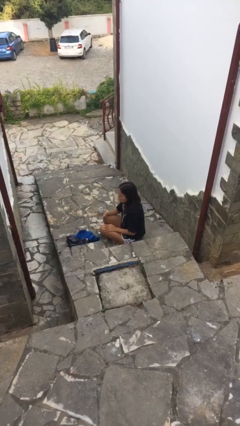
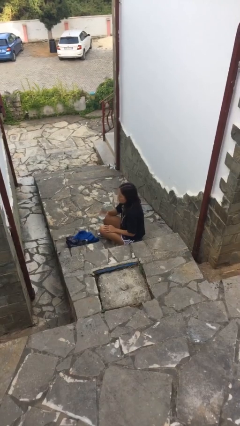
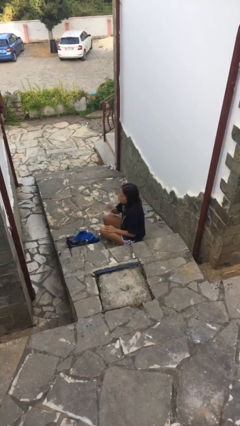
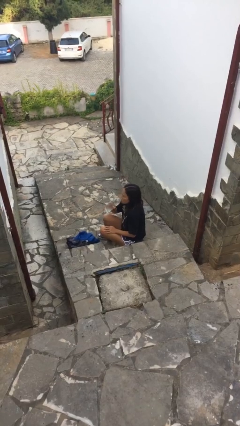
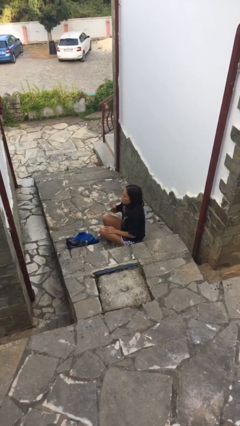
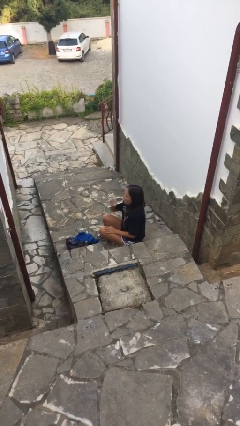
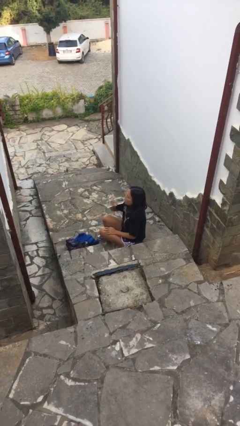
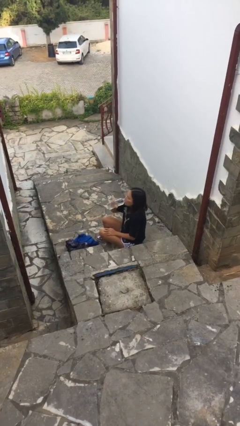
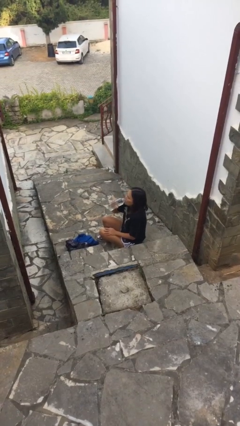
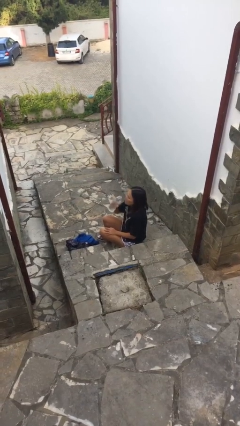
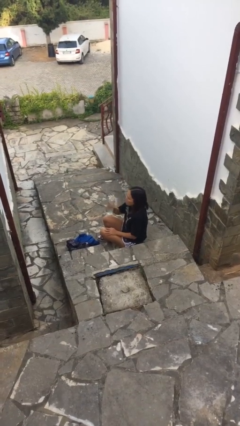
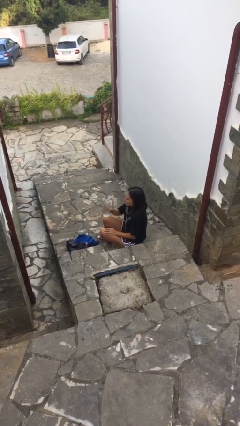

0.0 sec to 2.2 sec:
person drinks from bottle

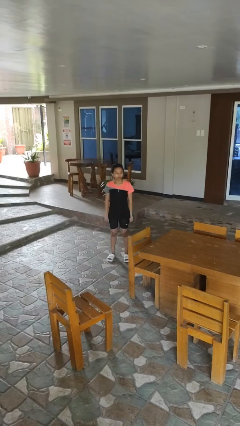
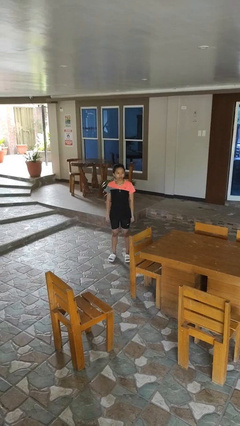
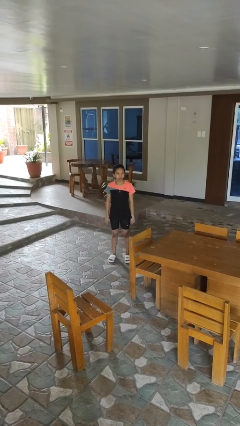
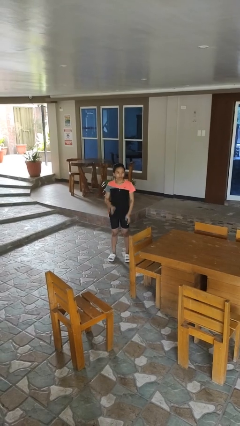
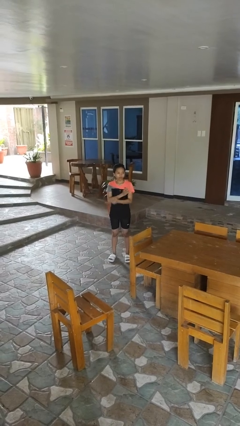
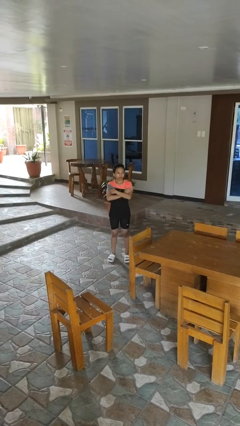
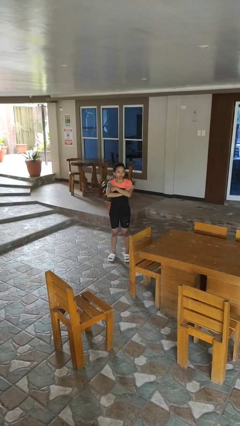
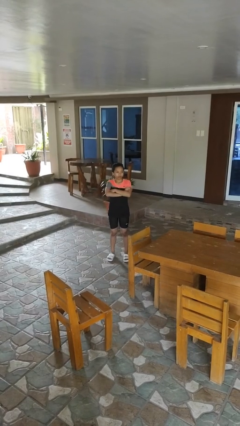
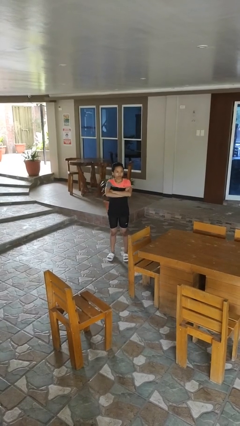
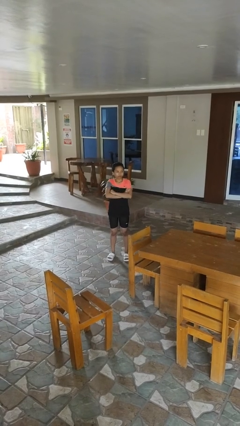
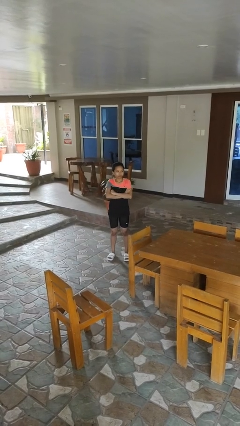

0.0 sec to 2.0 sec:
person crosses arms

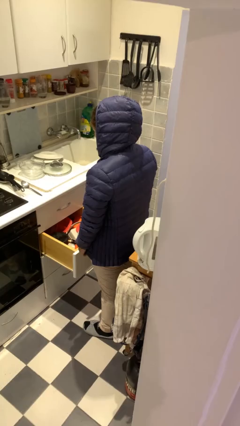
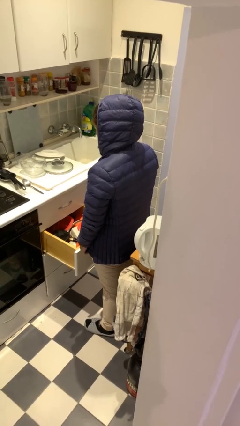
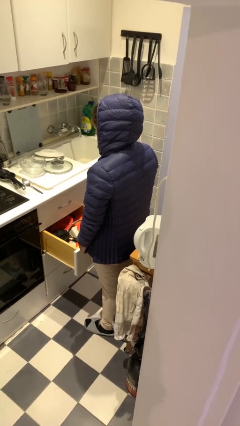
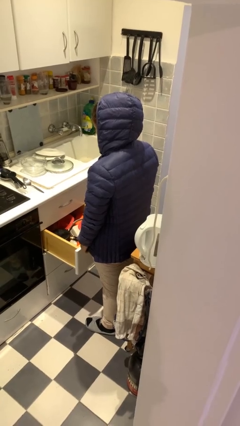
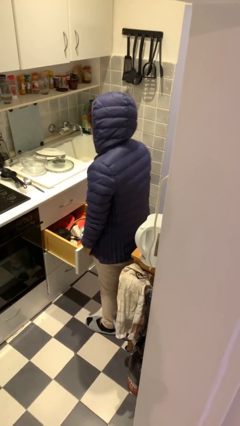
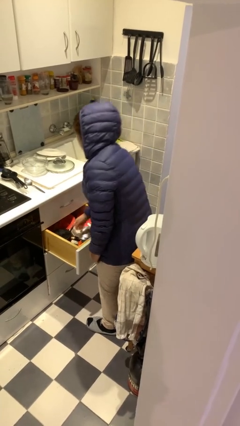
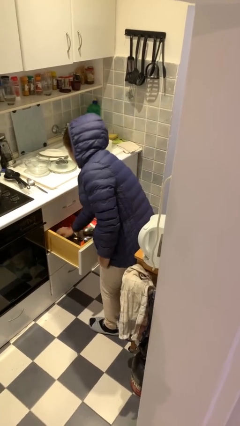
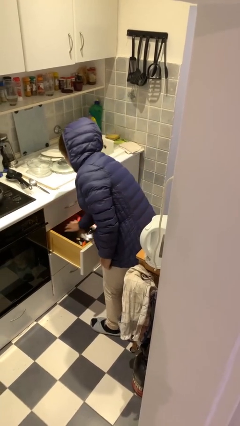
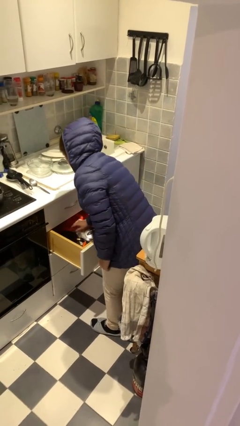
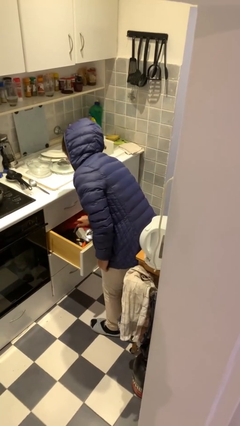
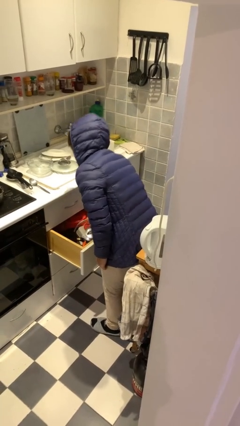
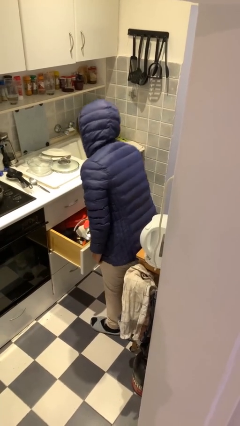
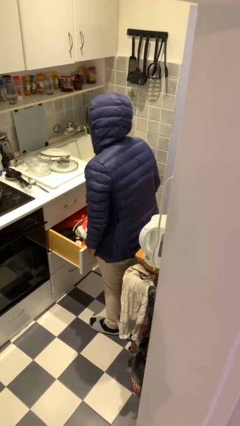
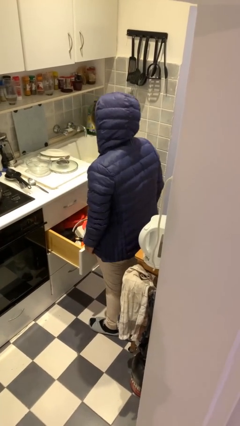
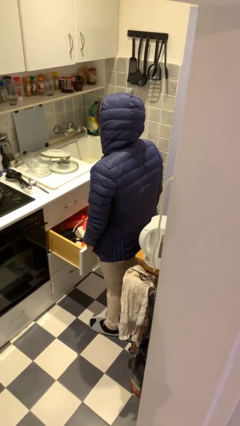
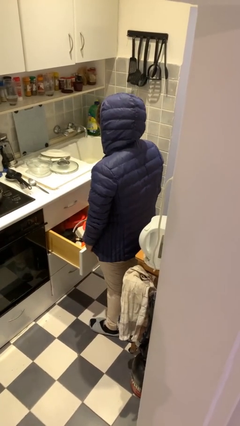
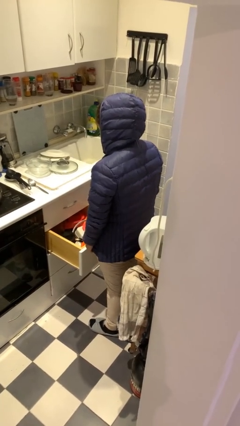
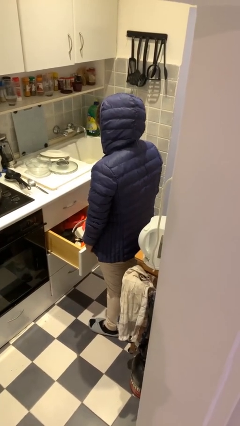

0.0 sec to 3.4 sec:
person searches in kitchen drawer

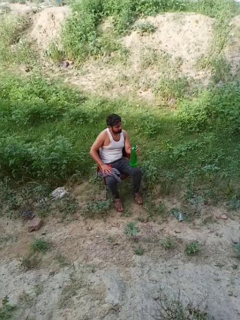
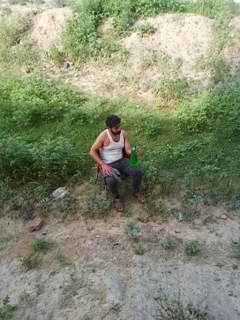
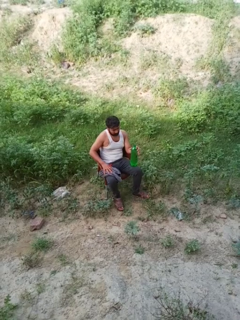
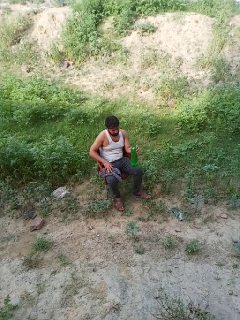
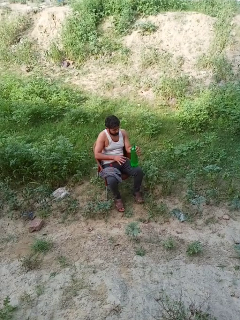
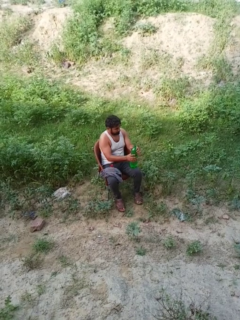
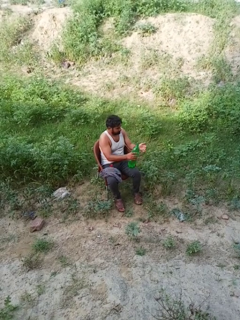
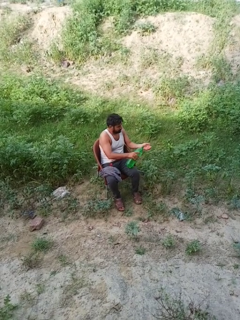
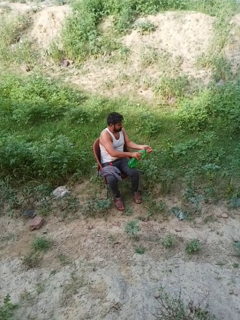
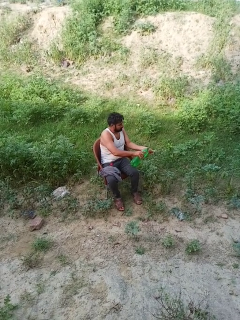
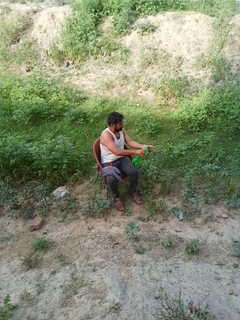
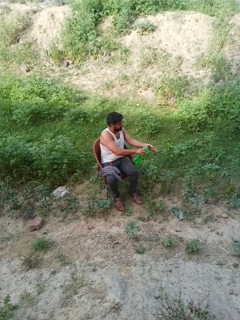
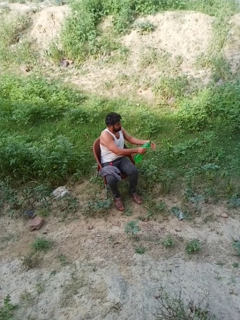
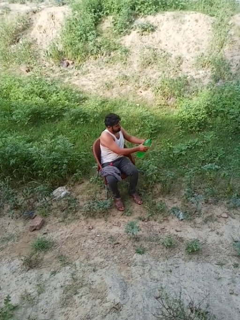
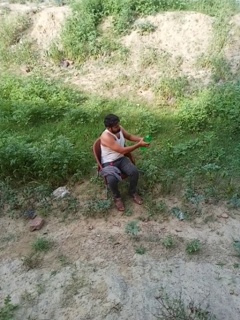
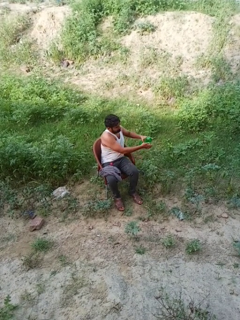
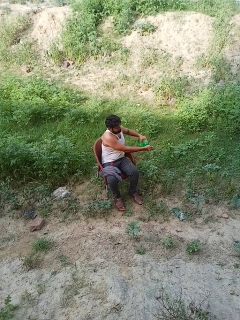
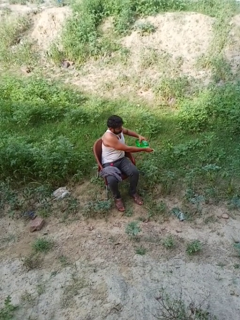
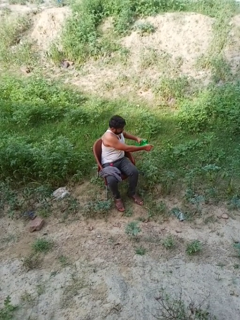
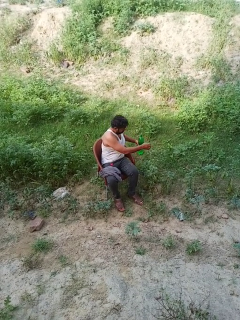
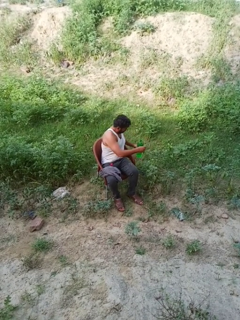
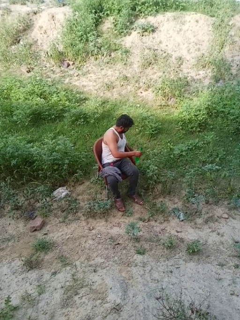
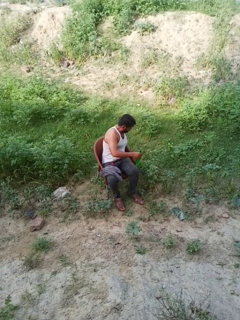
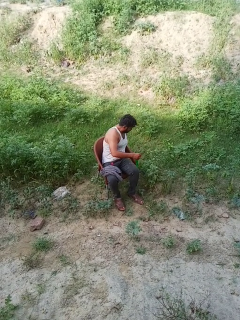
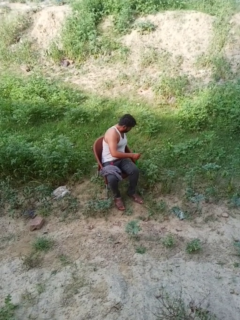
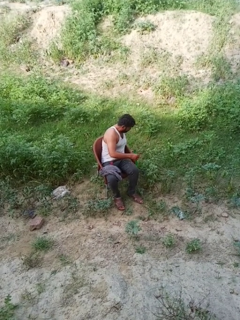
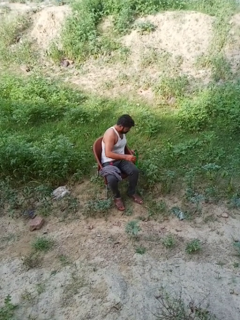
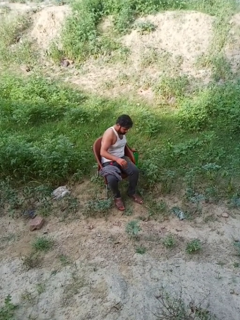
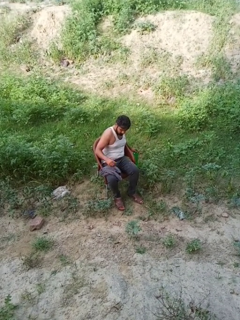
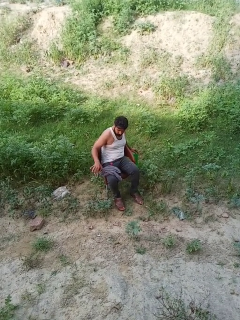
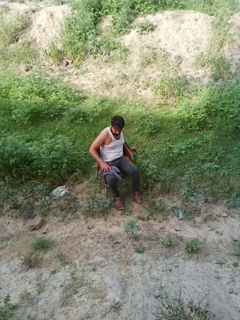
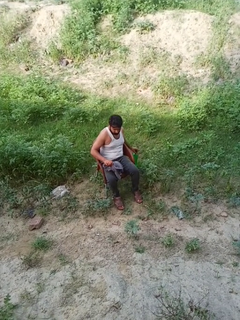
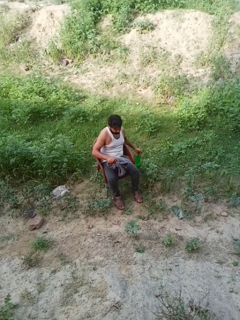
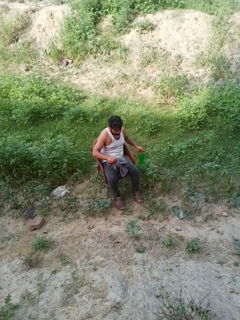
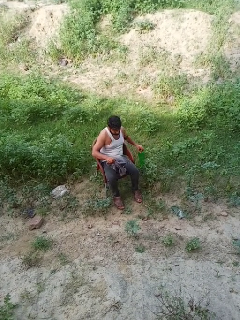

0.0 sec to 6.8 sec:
person washes hands

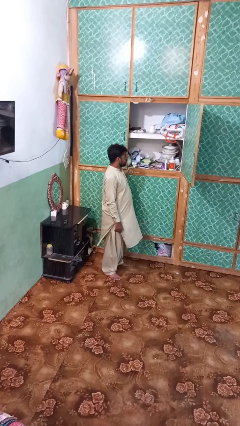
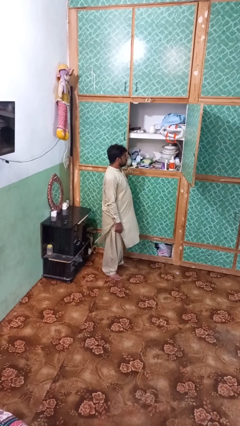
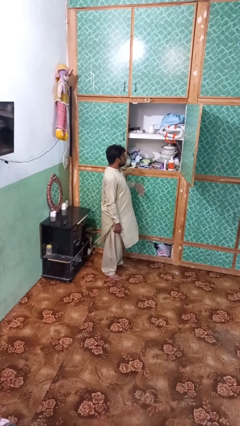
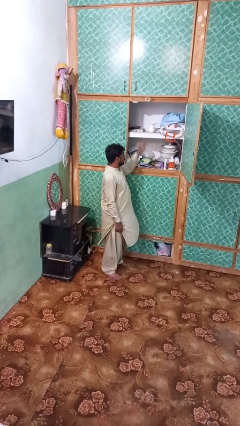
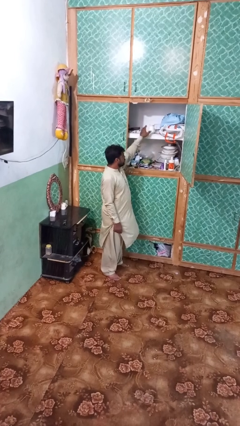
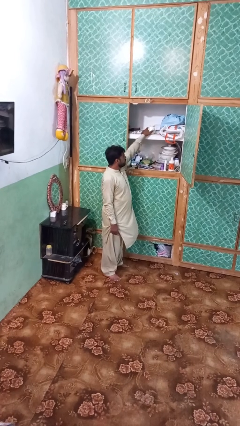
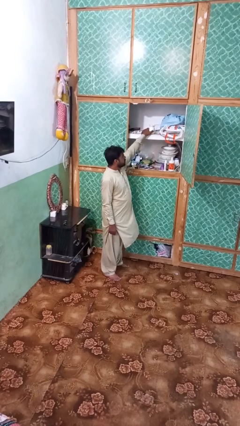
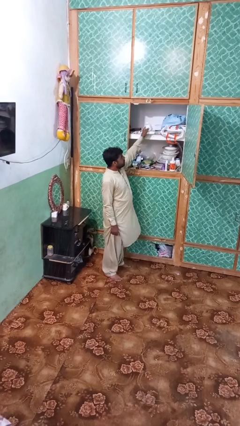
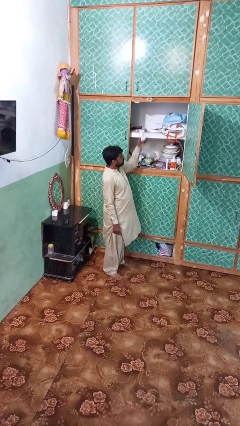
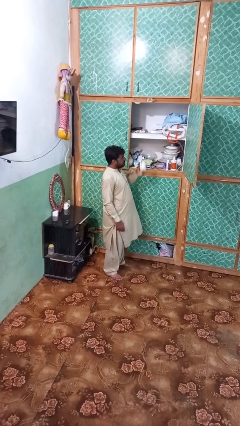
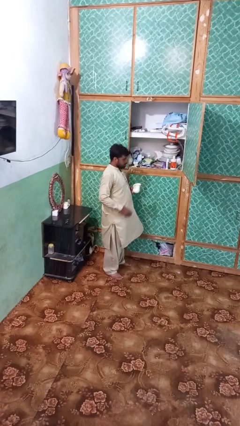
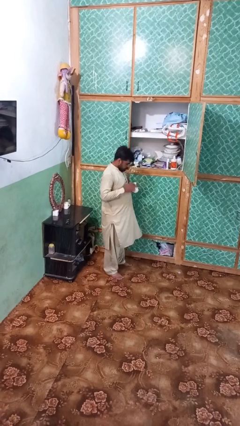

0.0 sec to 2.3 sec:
person picks up object from shelf

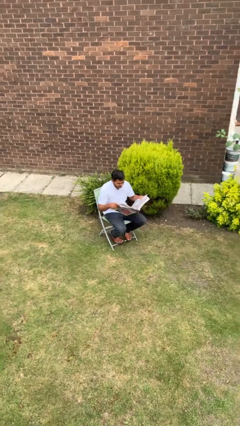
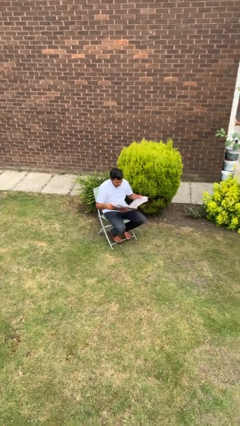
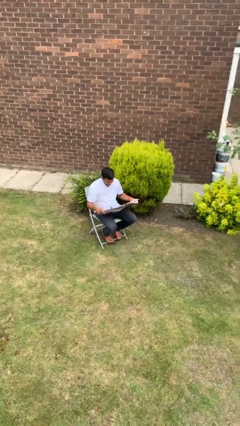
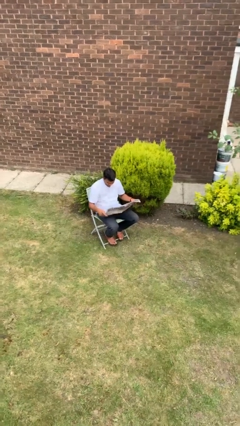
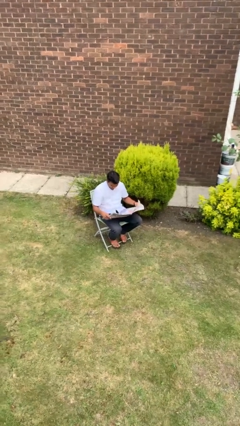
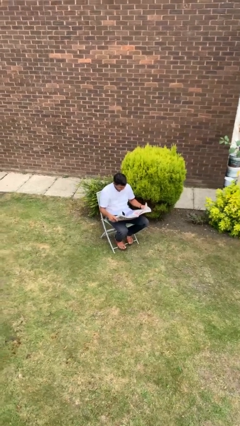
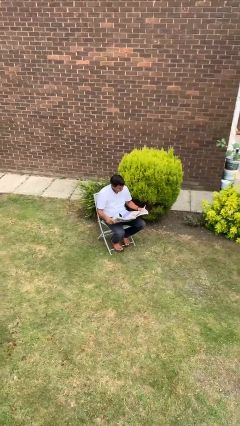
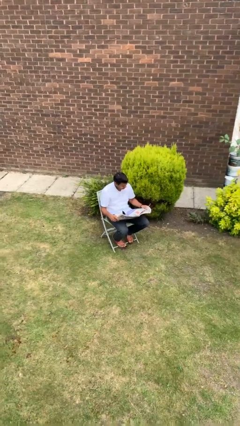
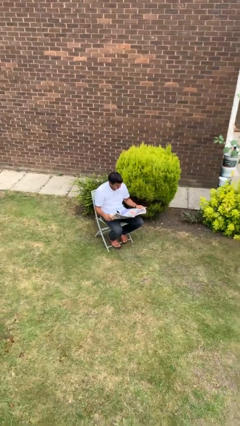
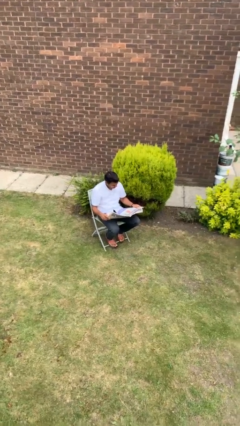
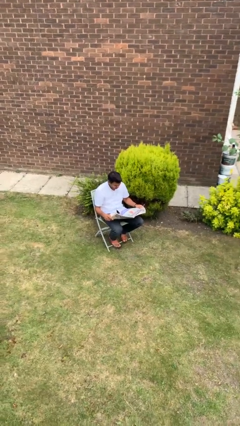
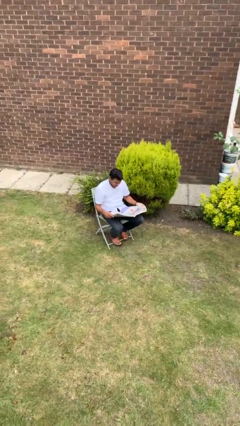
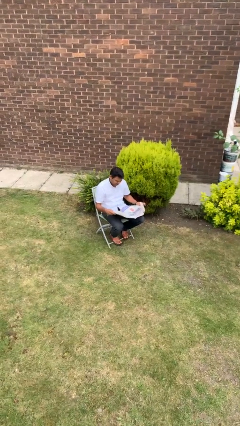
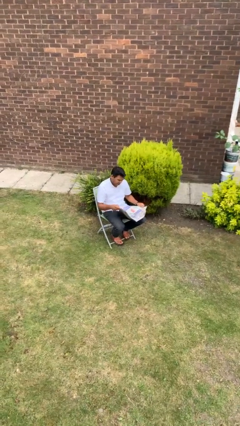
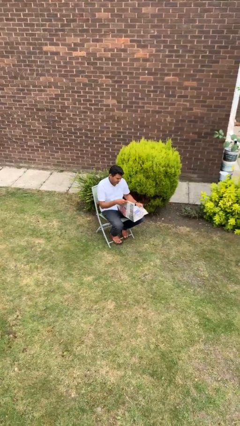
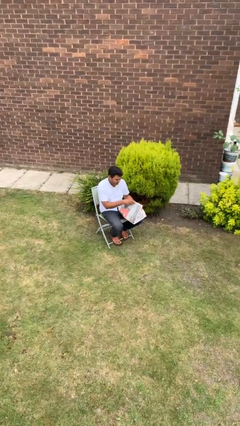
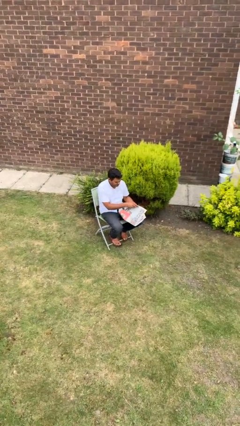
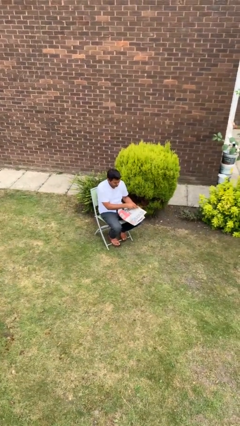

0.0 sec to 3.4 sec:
person reads newspaper
